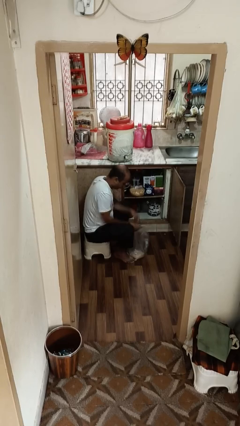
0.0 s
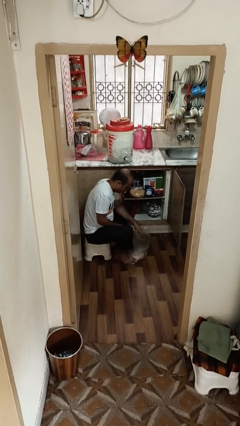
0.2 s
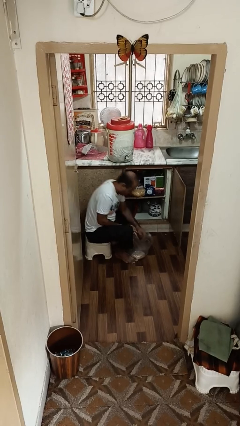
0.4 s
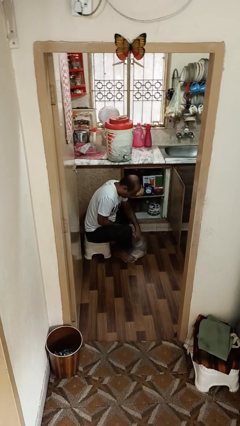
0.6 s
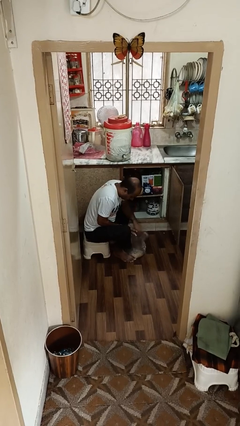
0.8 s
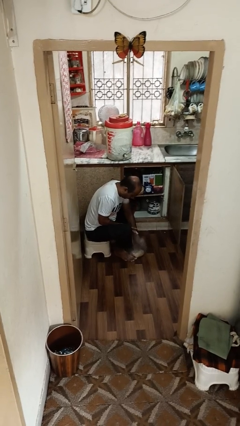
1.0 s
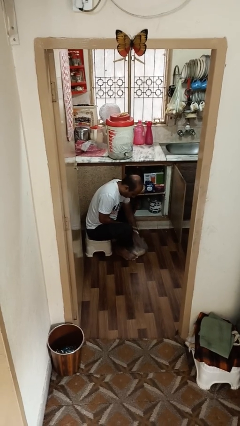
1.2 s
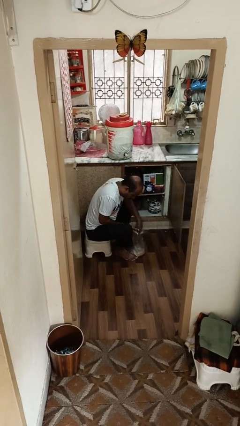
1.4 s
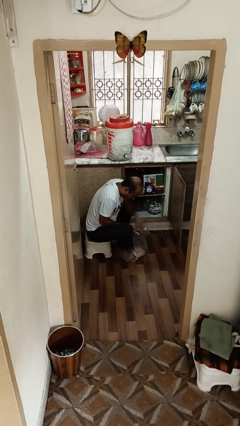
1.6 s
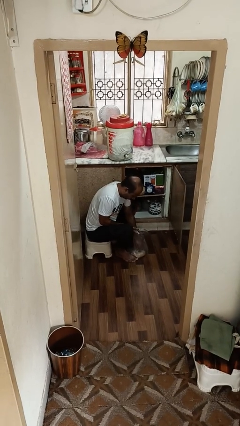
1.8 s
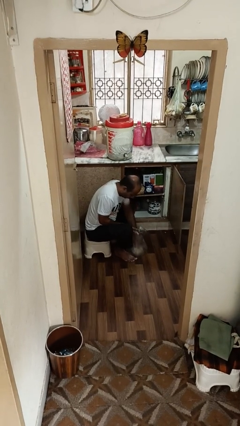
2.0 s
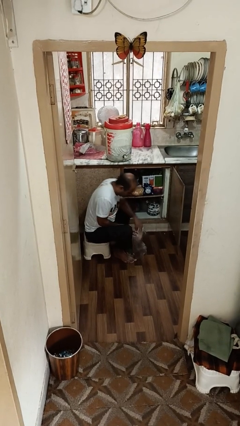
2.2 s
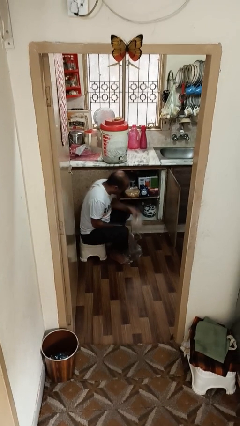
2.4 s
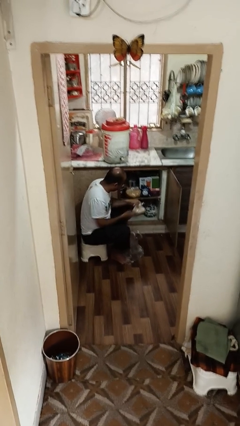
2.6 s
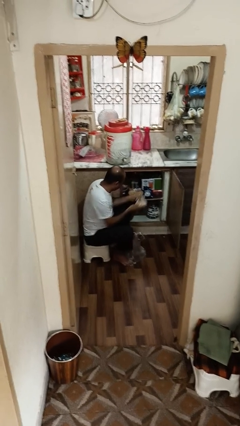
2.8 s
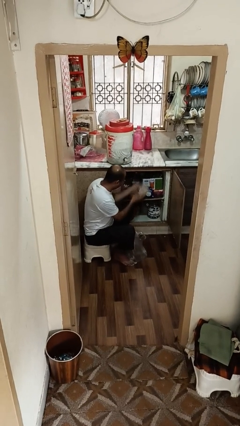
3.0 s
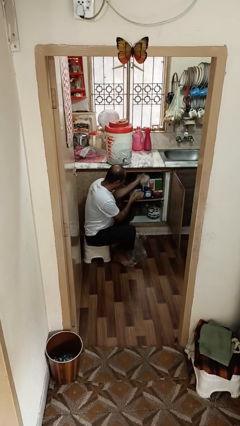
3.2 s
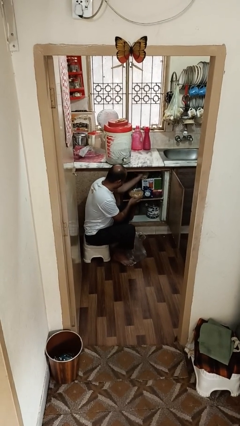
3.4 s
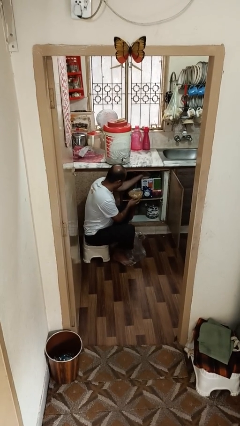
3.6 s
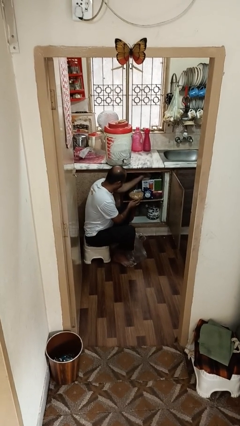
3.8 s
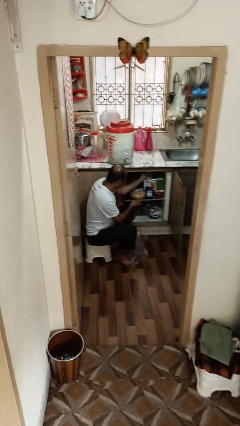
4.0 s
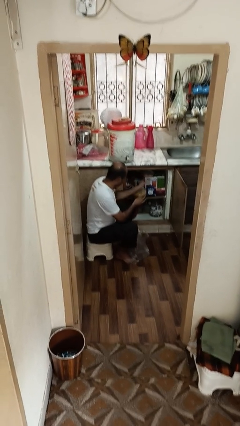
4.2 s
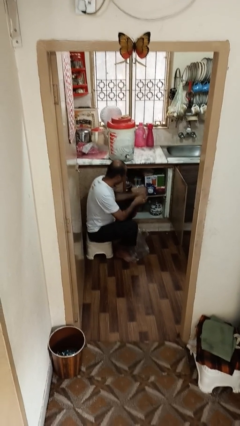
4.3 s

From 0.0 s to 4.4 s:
person loads groceries into cabinet

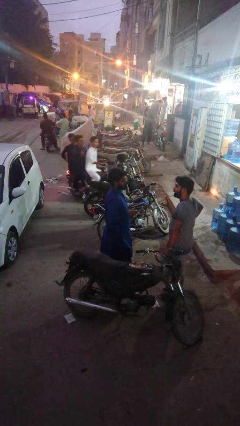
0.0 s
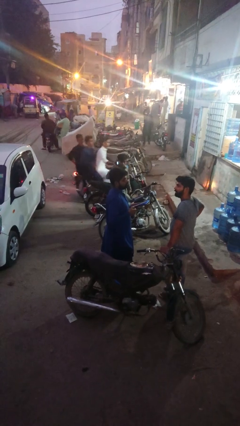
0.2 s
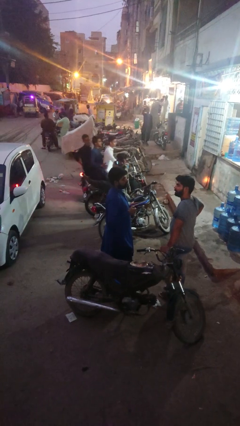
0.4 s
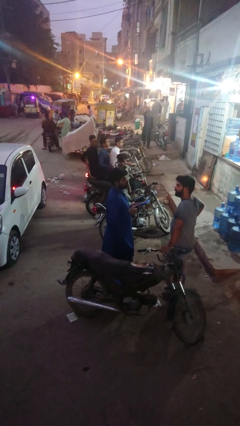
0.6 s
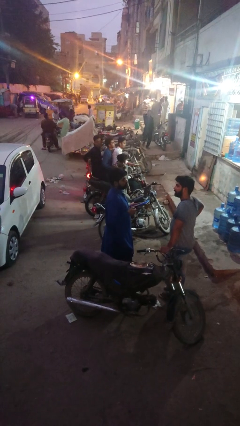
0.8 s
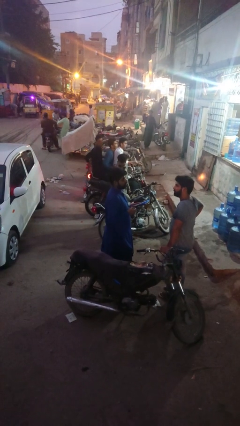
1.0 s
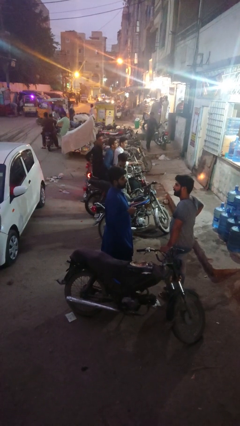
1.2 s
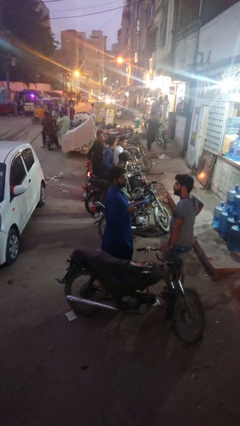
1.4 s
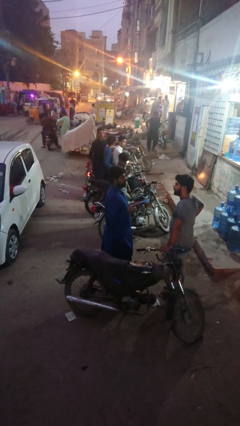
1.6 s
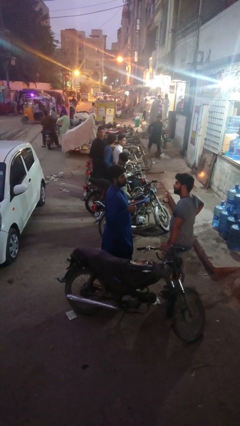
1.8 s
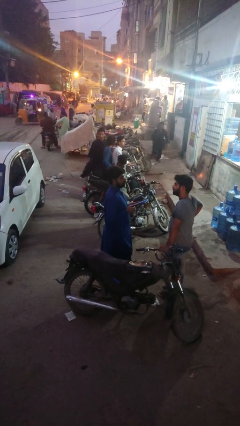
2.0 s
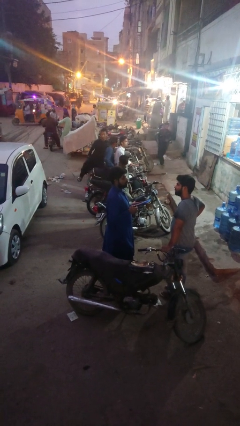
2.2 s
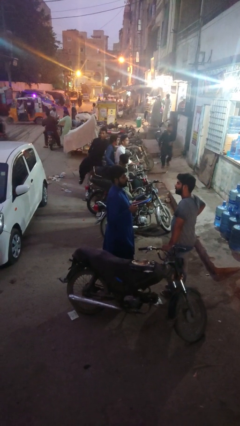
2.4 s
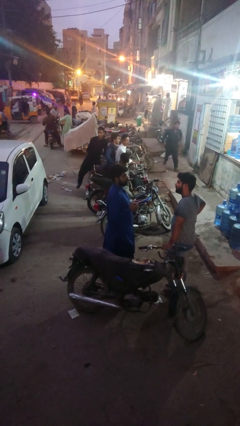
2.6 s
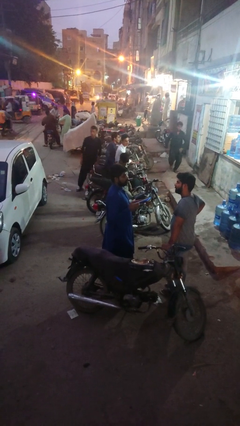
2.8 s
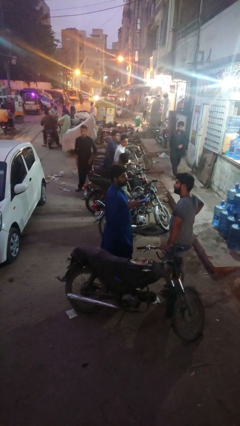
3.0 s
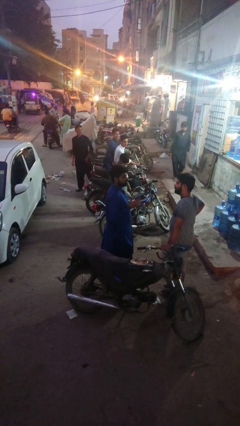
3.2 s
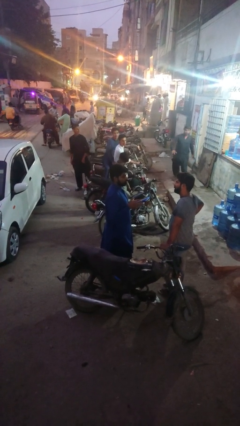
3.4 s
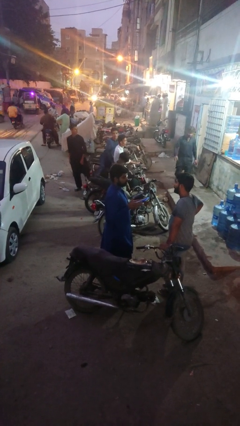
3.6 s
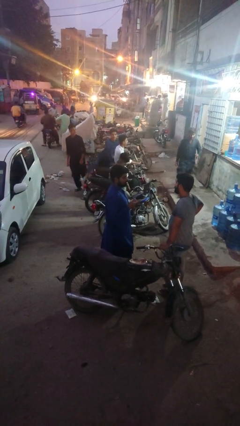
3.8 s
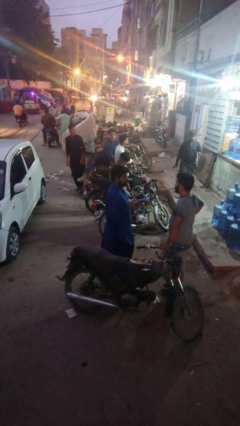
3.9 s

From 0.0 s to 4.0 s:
person talks to person

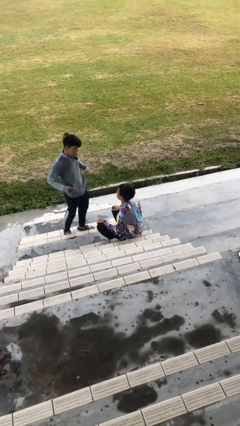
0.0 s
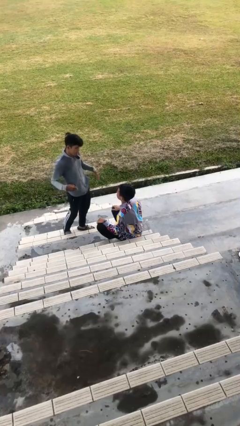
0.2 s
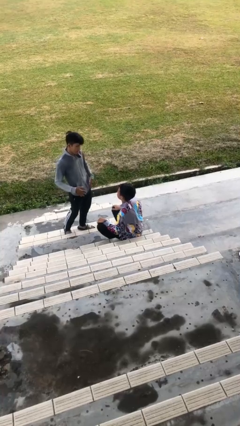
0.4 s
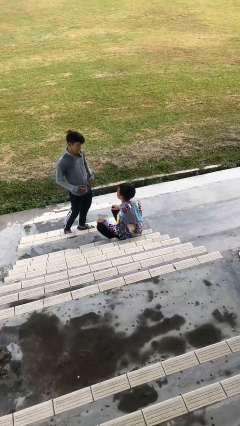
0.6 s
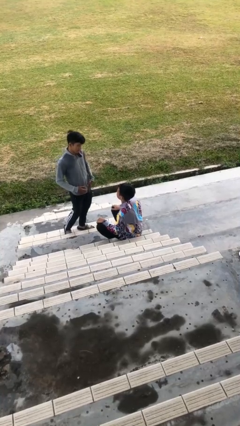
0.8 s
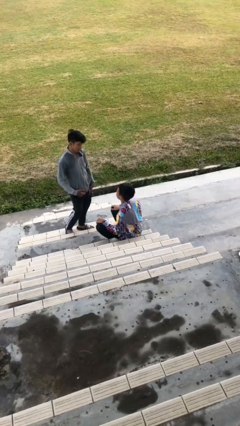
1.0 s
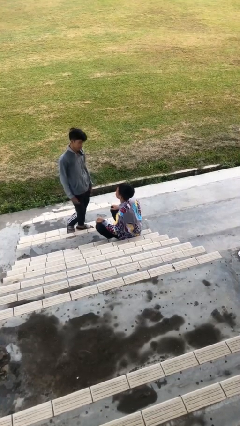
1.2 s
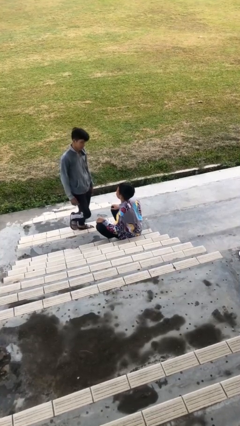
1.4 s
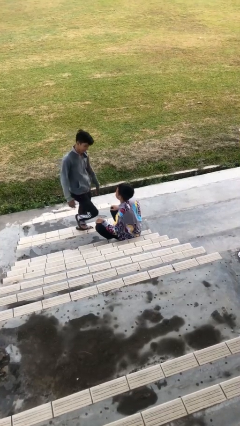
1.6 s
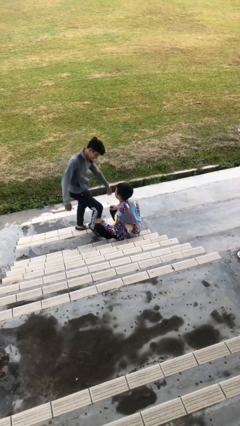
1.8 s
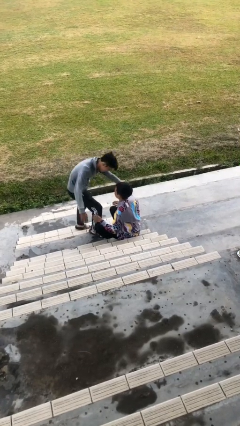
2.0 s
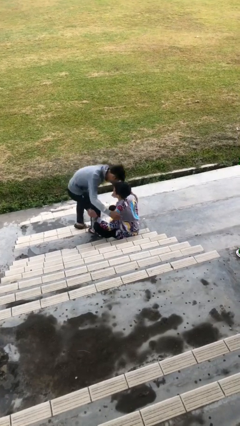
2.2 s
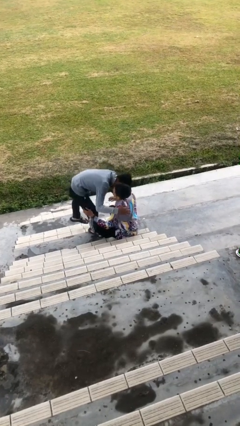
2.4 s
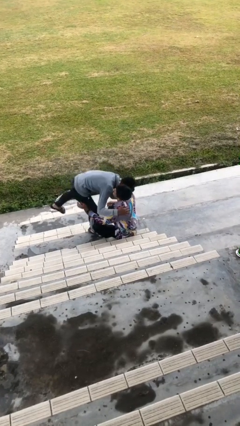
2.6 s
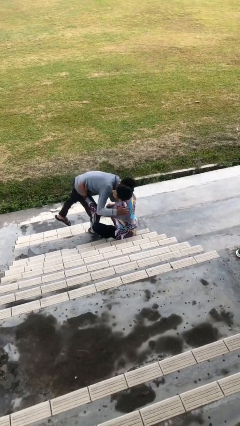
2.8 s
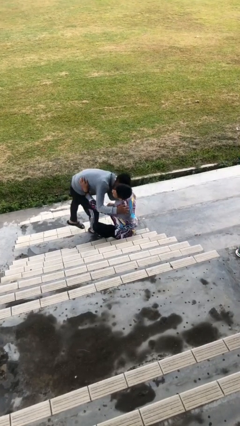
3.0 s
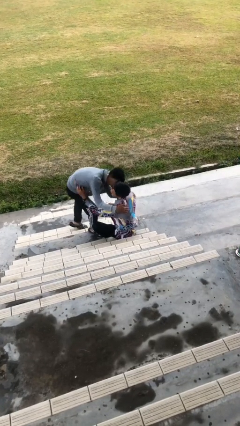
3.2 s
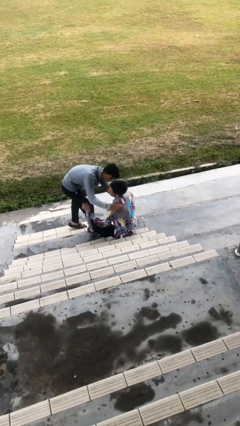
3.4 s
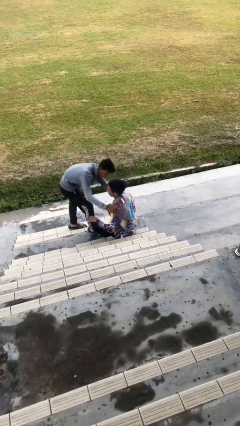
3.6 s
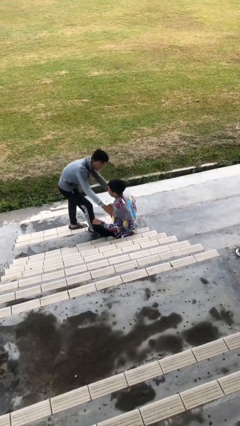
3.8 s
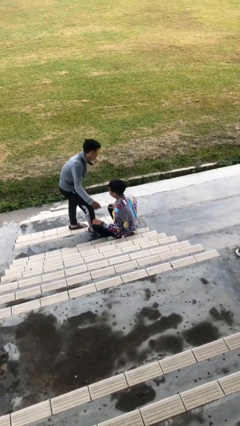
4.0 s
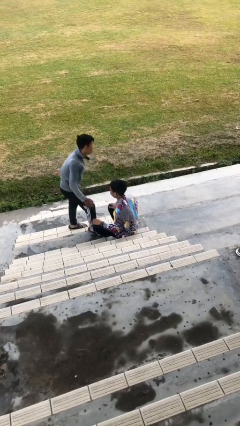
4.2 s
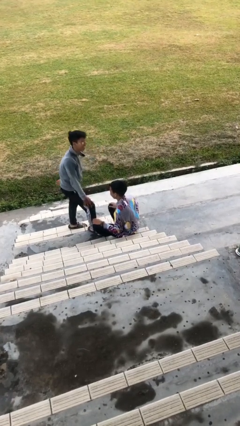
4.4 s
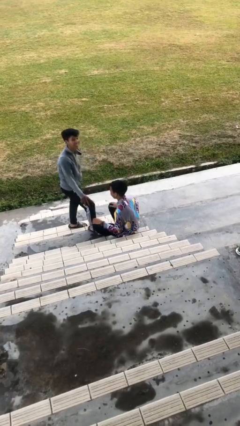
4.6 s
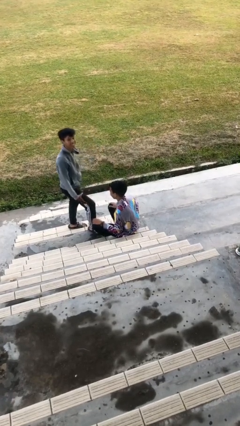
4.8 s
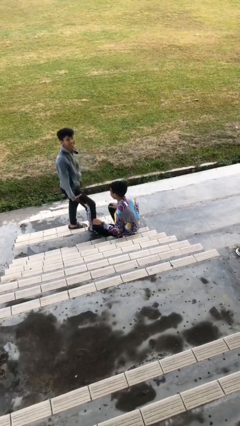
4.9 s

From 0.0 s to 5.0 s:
person embraces person

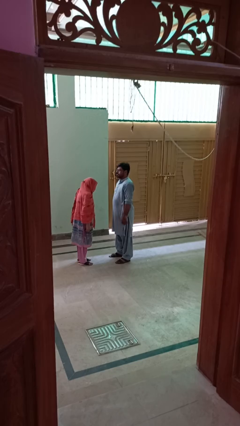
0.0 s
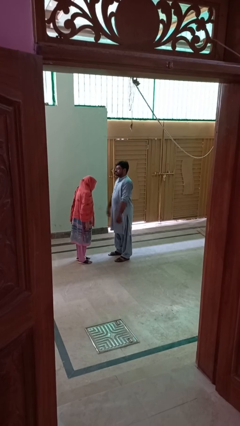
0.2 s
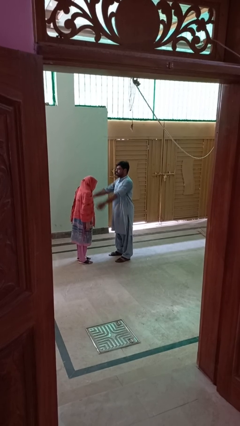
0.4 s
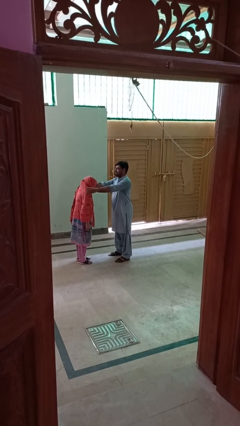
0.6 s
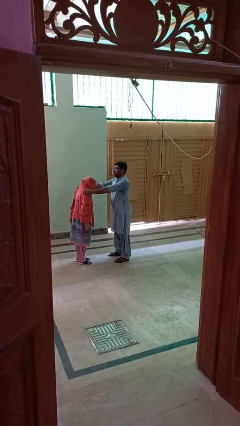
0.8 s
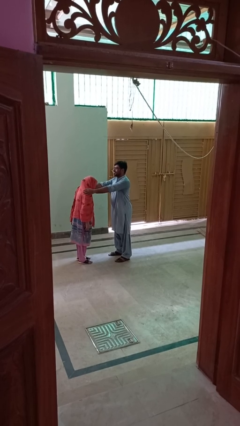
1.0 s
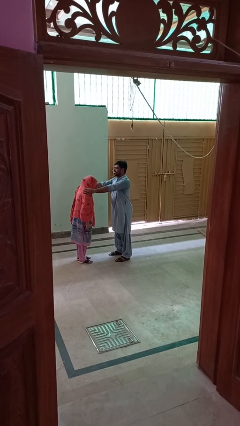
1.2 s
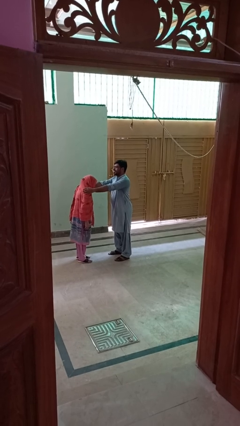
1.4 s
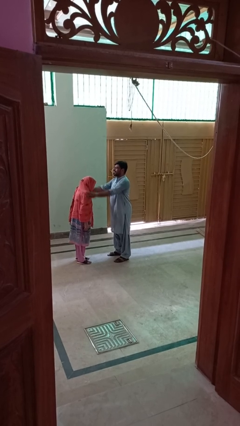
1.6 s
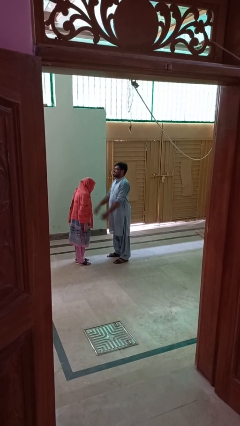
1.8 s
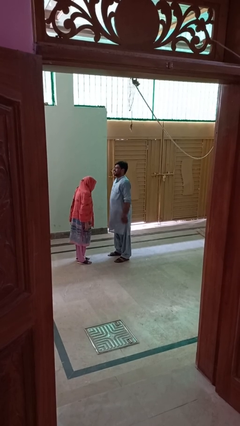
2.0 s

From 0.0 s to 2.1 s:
person pounds shoulders of person

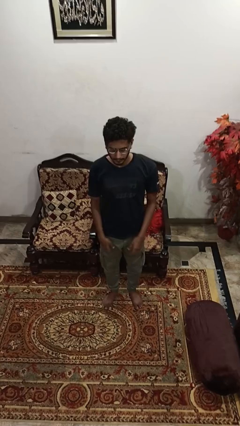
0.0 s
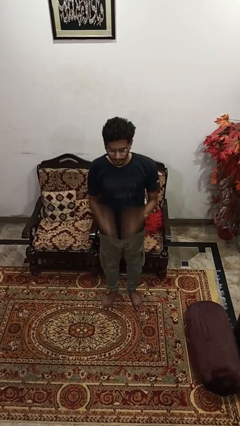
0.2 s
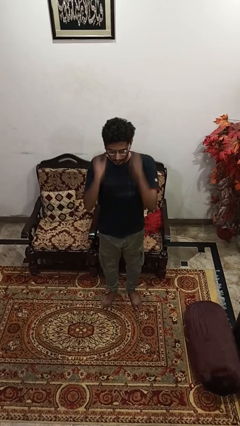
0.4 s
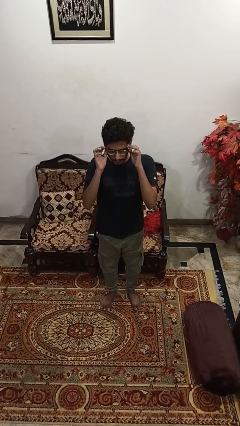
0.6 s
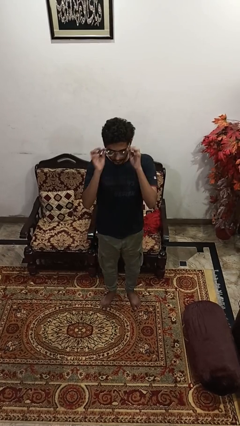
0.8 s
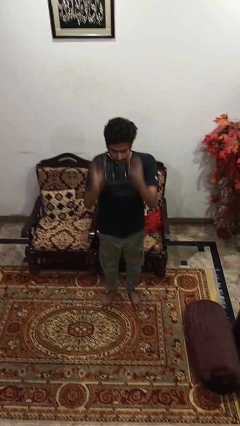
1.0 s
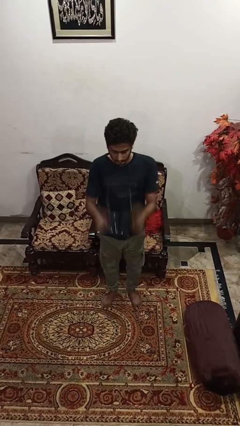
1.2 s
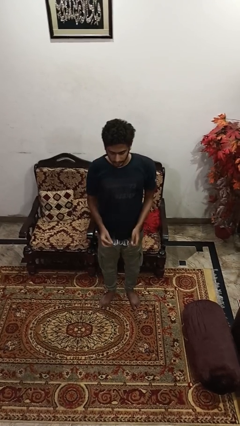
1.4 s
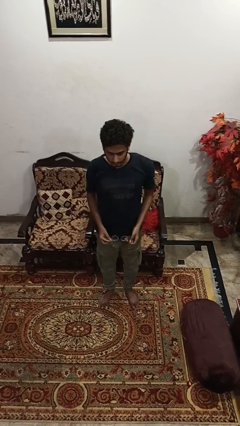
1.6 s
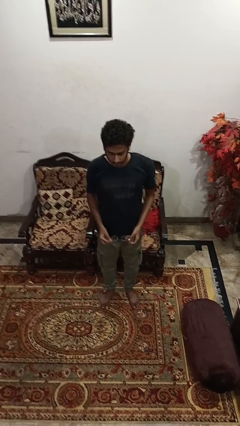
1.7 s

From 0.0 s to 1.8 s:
person takes off glasses

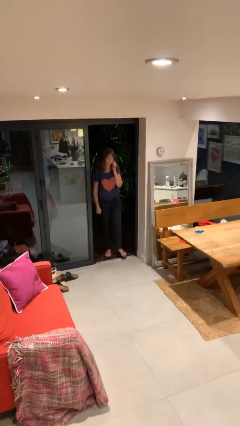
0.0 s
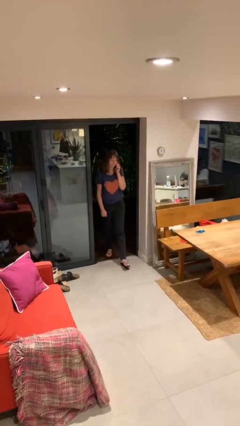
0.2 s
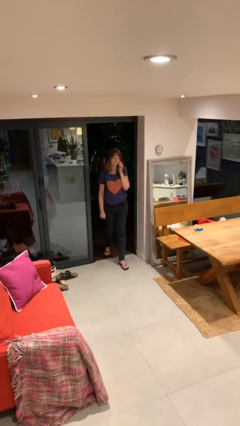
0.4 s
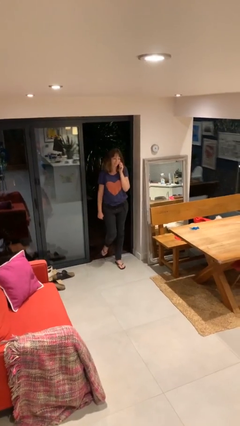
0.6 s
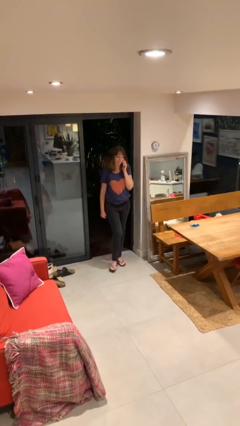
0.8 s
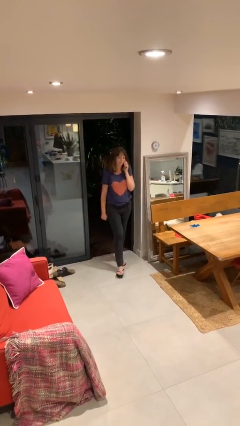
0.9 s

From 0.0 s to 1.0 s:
person enters scene through structure
